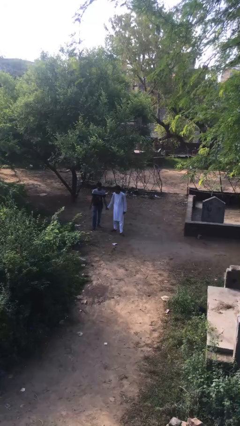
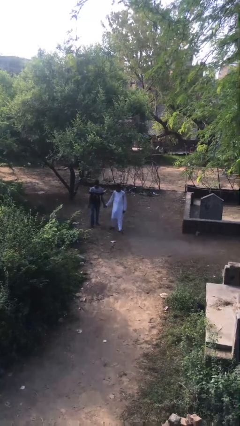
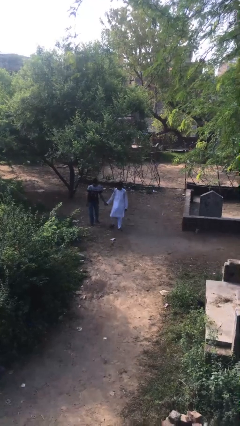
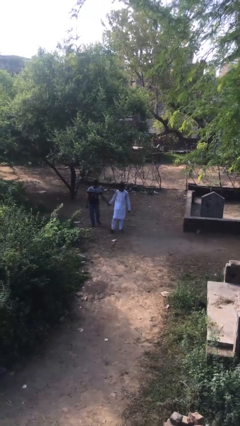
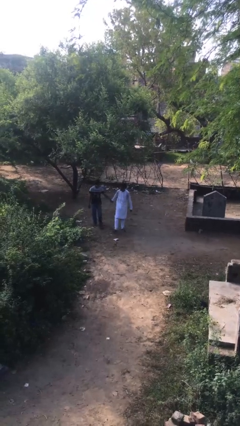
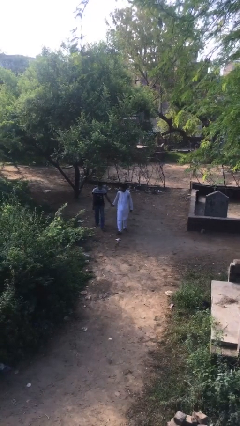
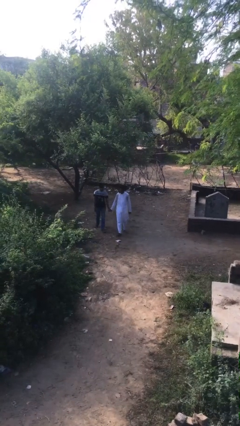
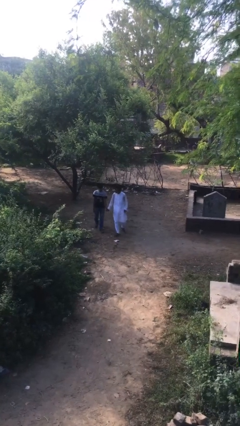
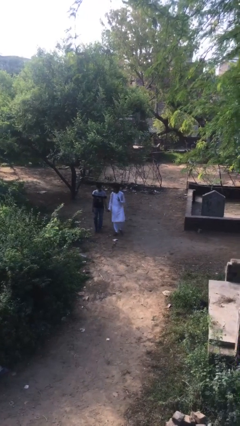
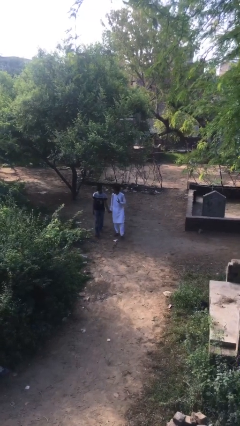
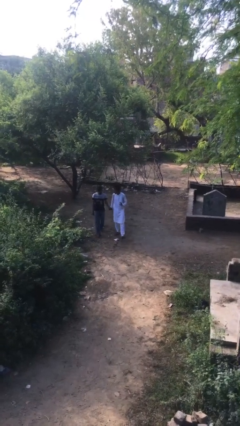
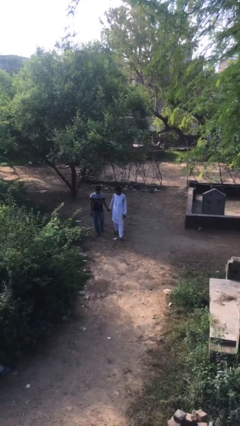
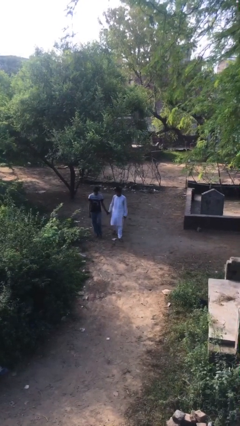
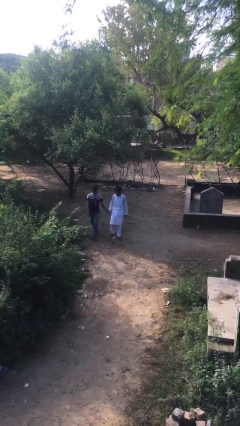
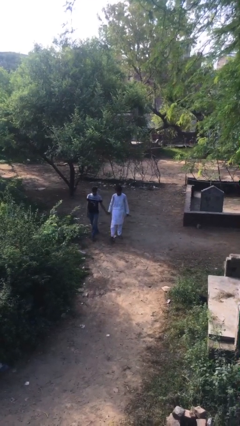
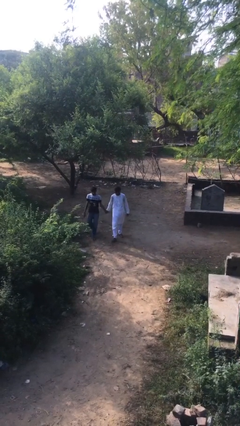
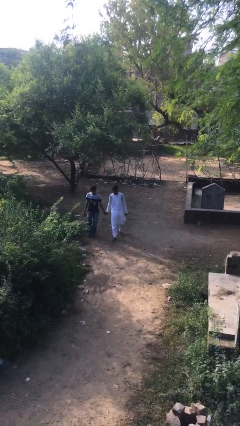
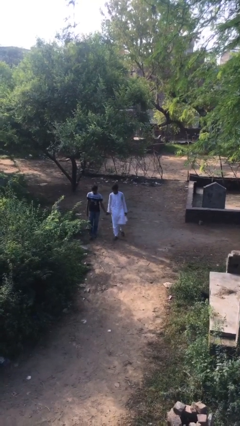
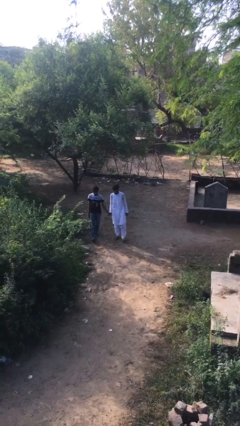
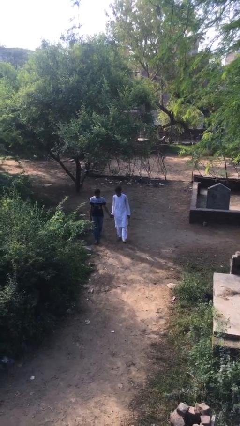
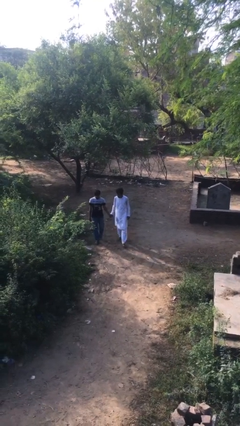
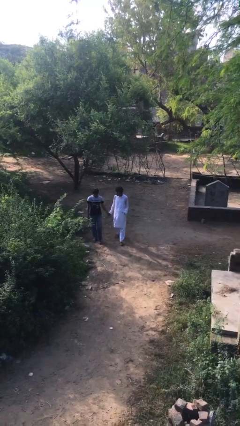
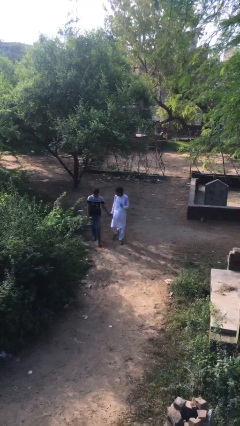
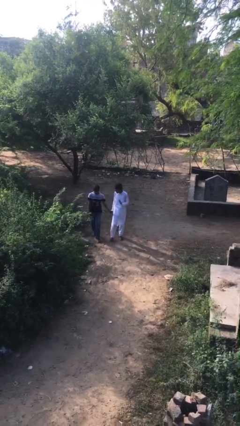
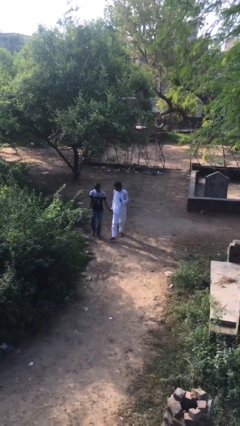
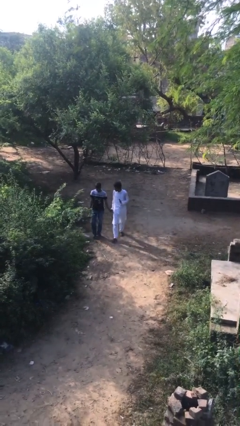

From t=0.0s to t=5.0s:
person holds hand

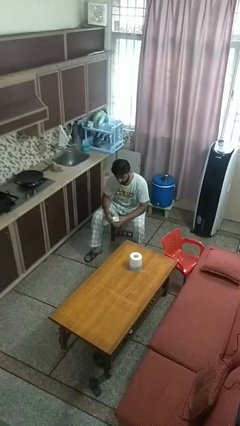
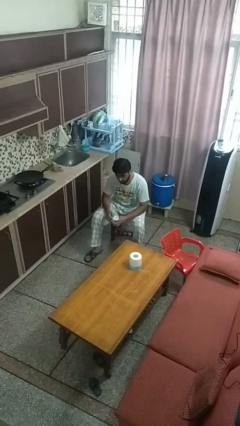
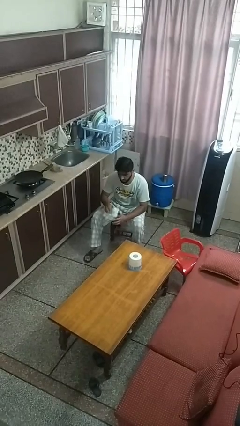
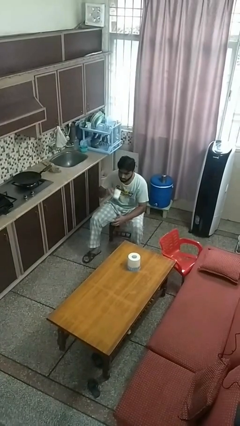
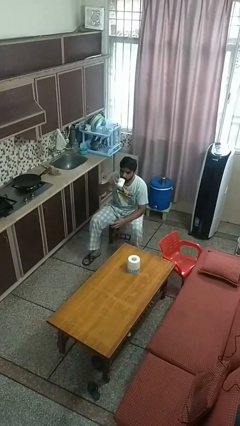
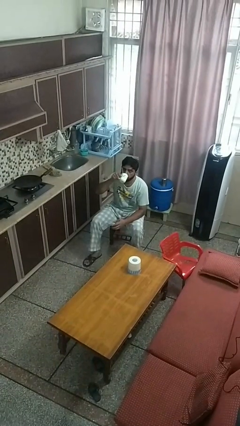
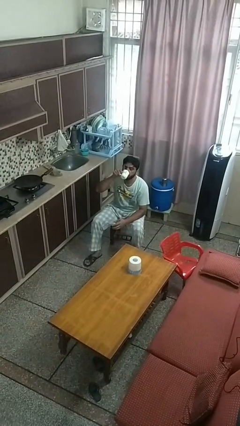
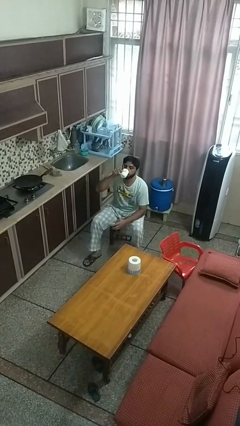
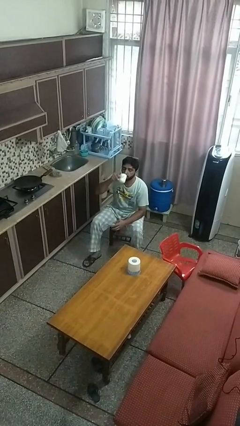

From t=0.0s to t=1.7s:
person drinks from mug

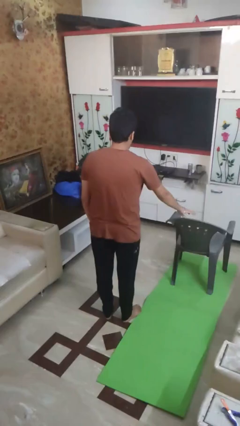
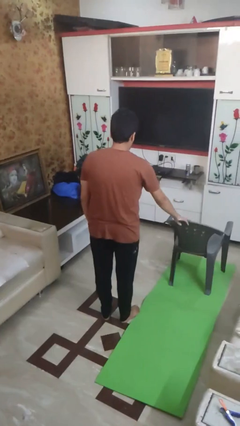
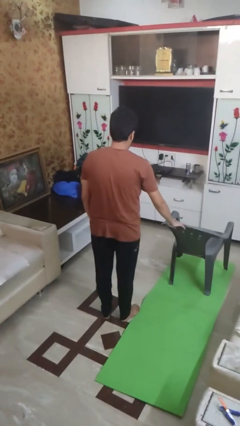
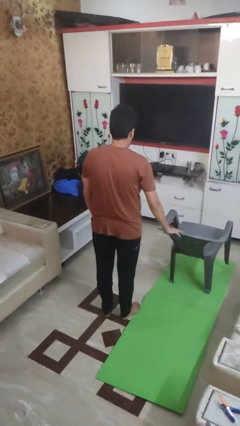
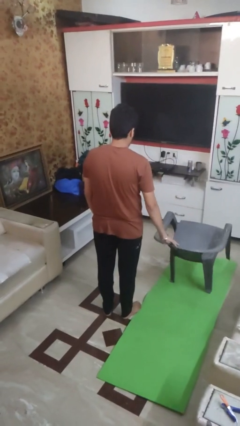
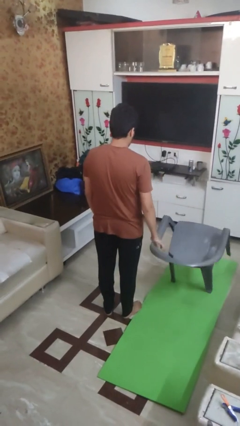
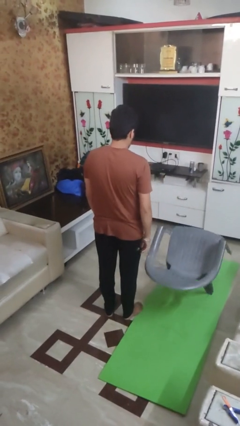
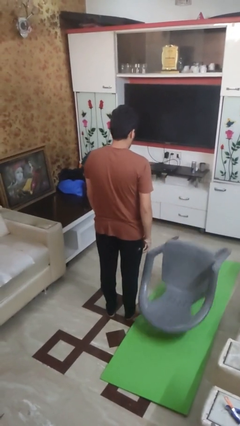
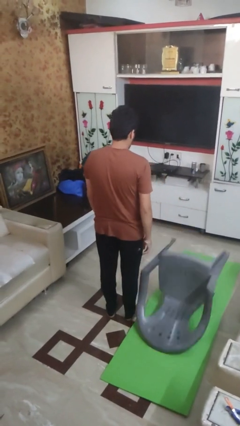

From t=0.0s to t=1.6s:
person knocks over furniture

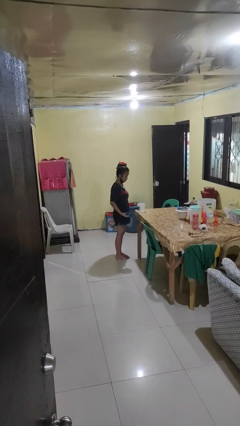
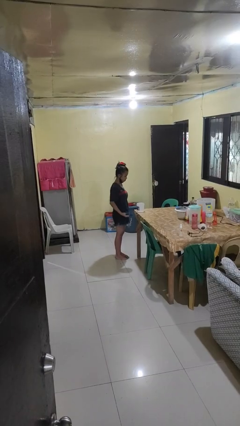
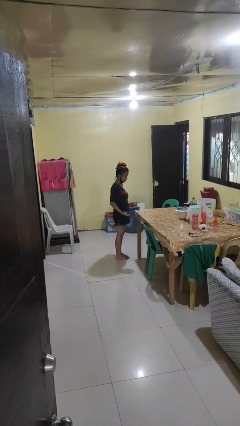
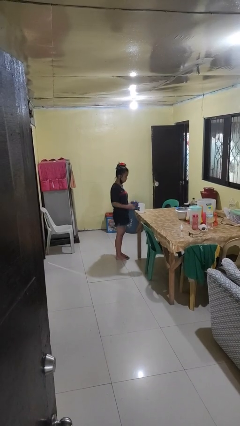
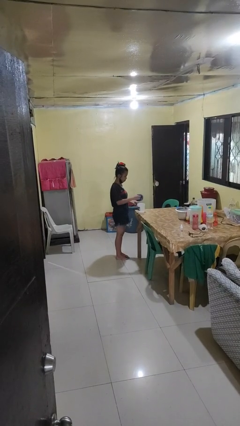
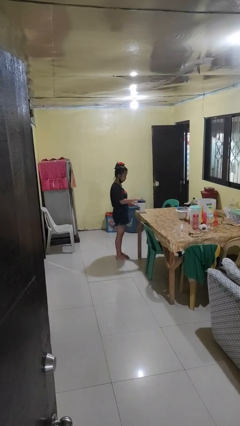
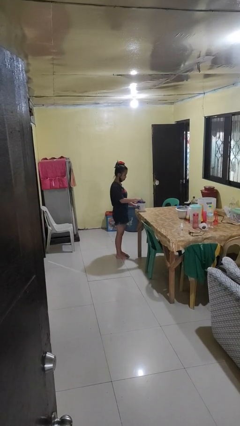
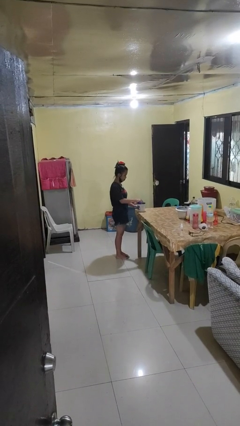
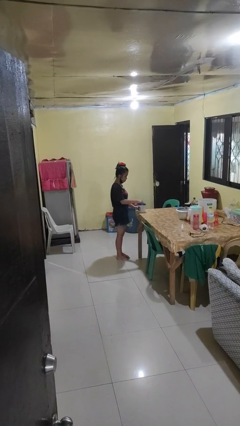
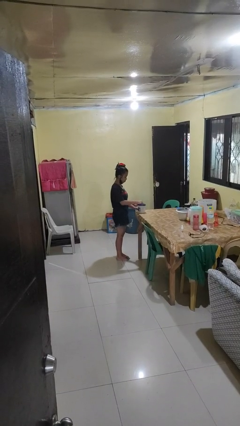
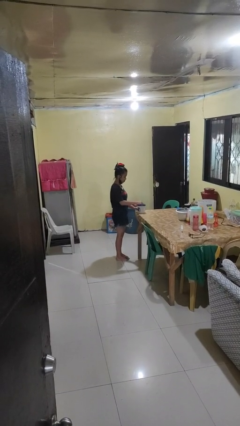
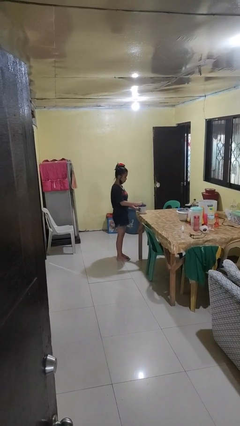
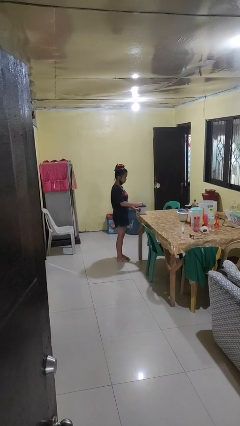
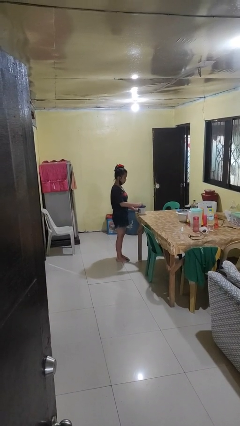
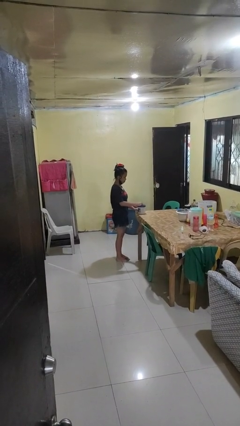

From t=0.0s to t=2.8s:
person closes jar

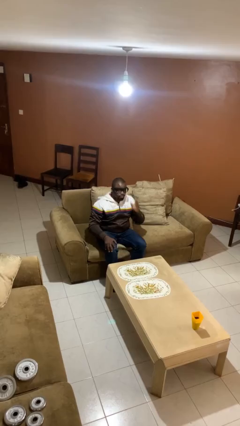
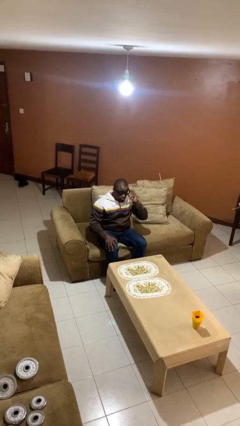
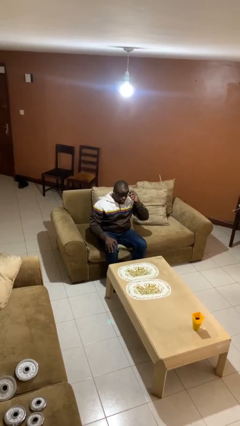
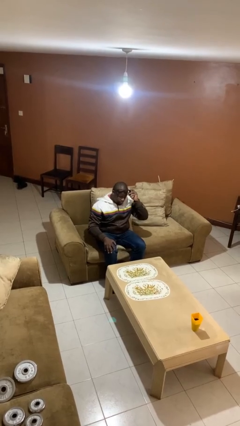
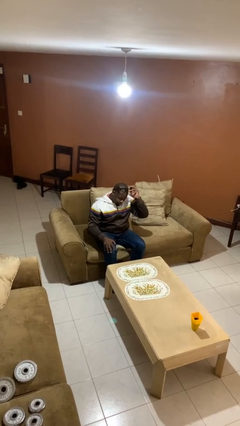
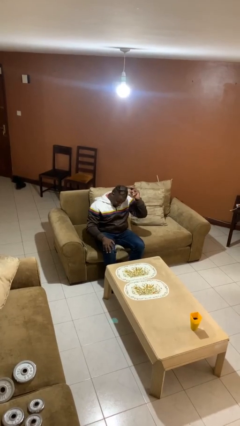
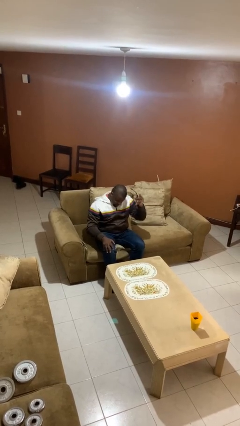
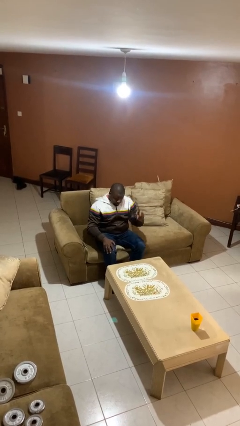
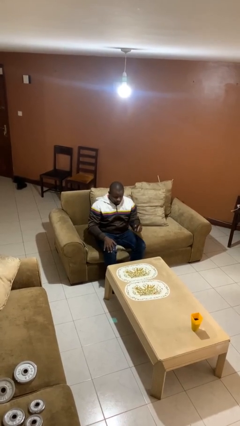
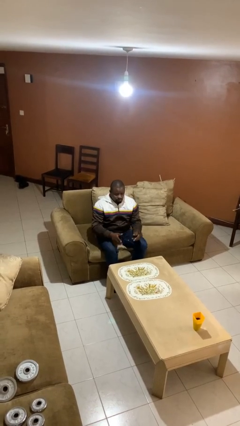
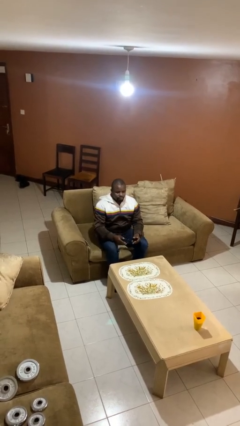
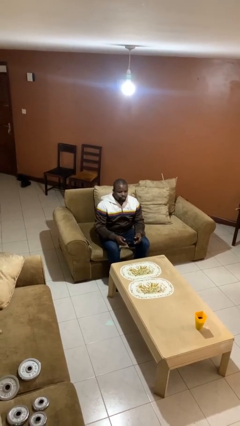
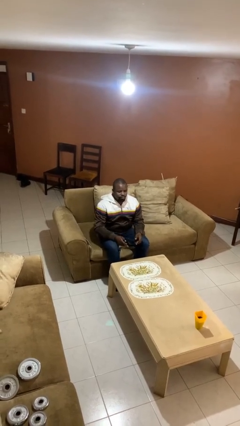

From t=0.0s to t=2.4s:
person takes off glasses

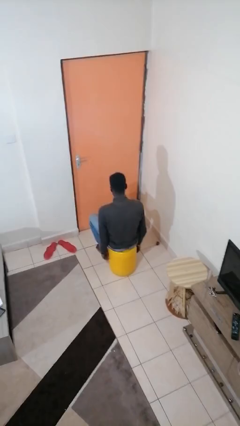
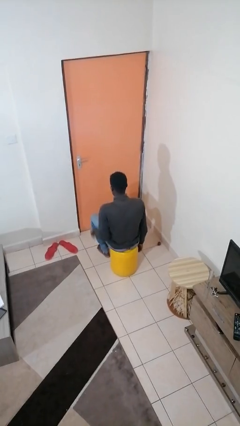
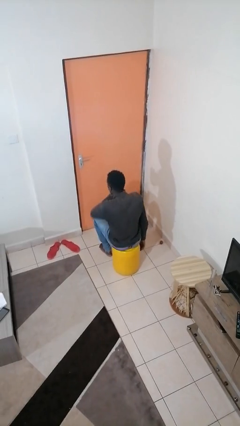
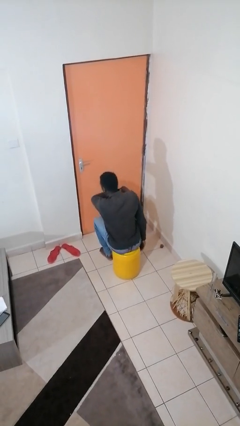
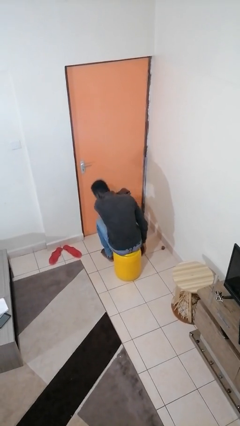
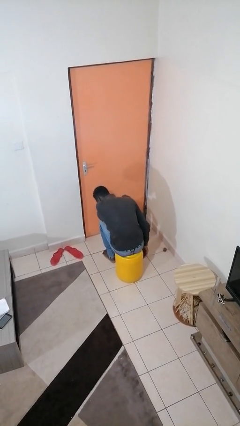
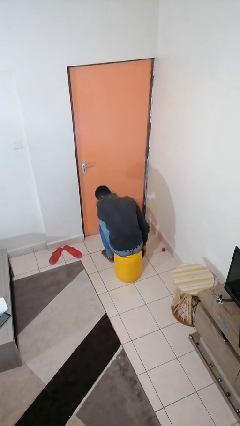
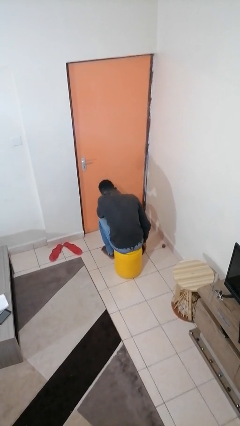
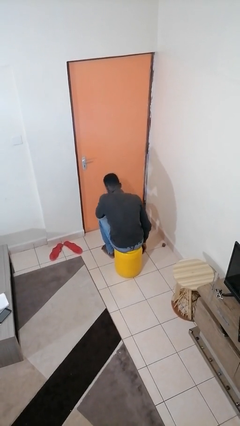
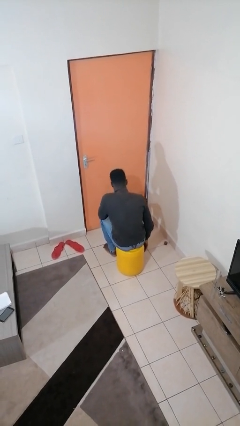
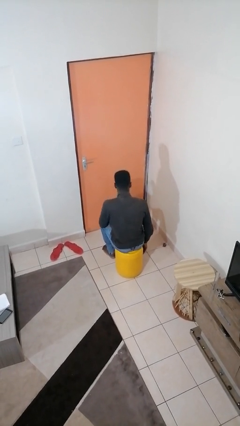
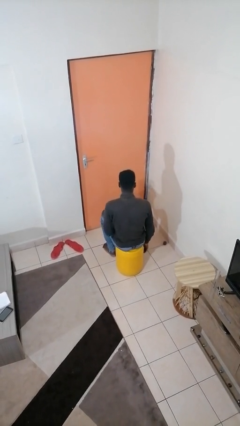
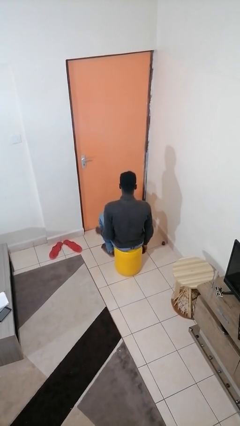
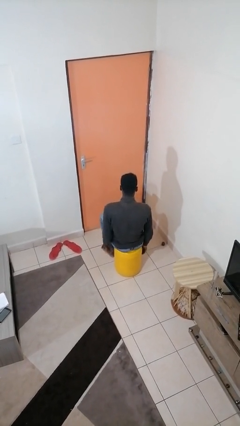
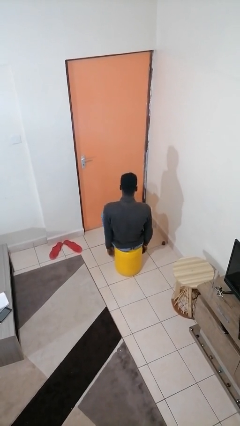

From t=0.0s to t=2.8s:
person sneezes into arm

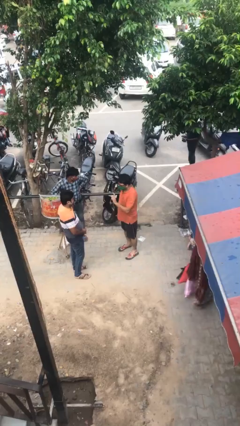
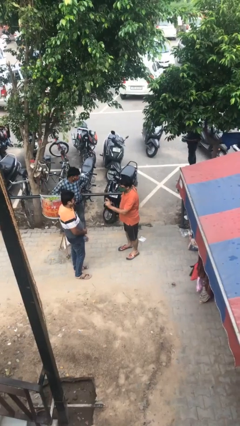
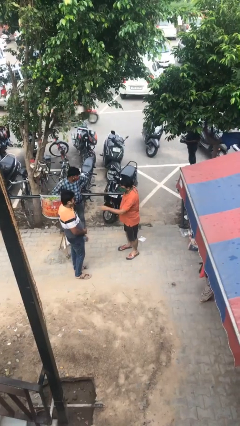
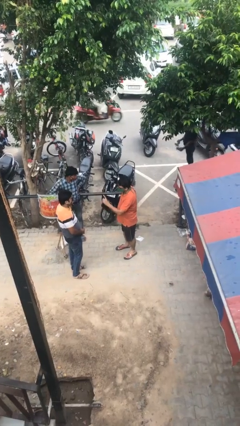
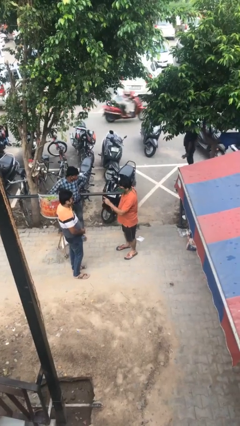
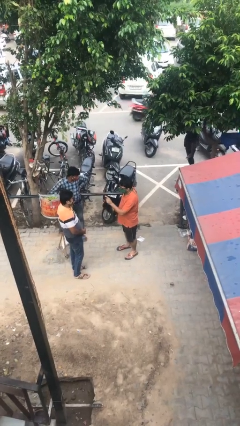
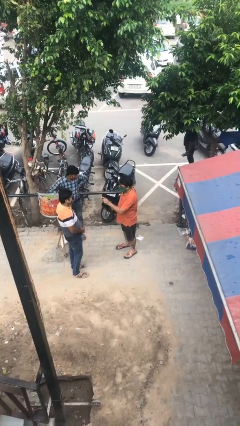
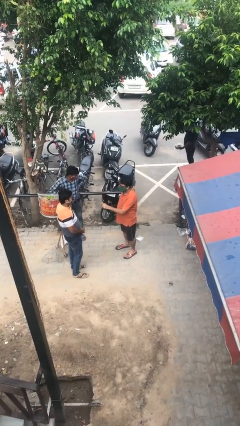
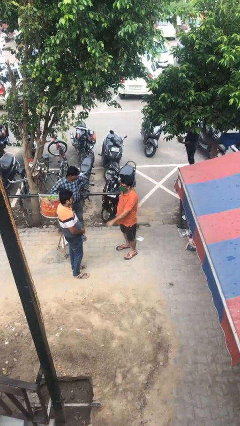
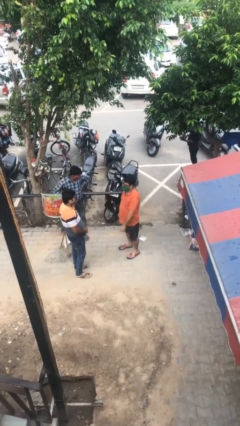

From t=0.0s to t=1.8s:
person points at person
